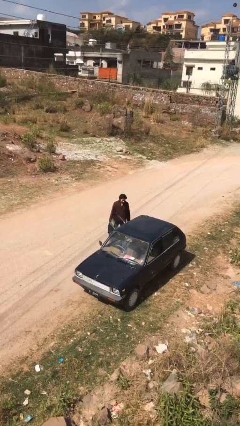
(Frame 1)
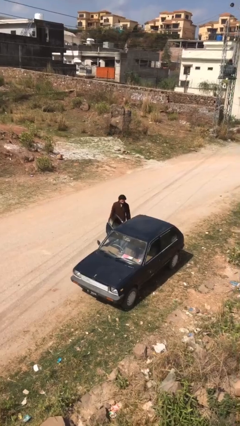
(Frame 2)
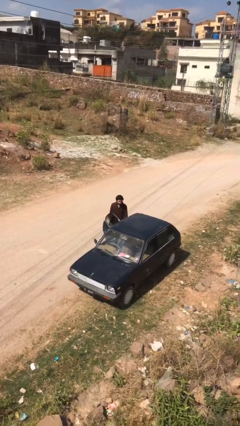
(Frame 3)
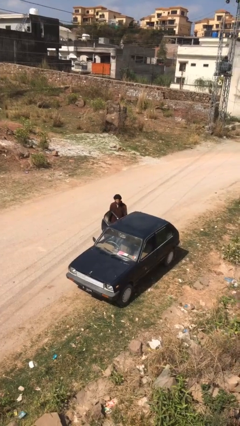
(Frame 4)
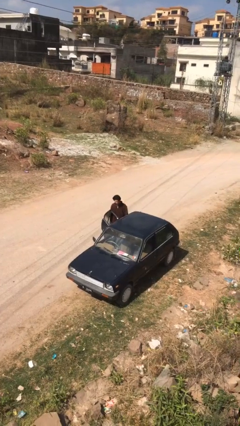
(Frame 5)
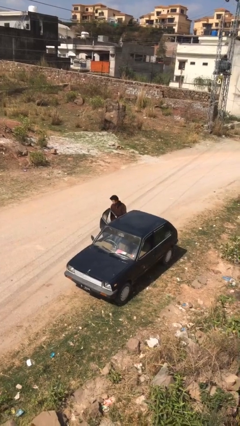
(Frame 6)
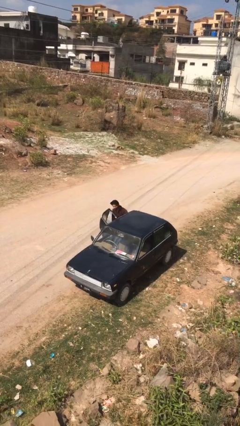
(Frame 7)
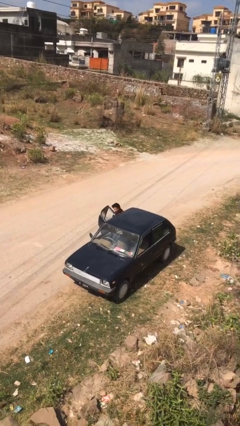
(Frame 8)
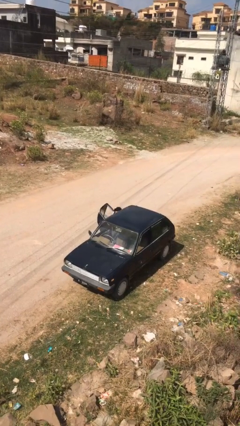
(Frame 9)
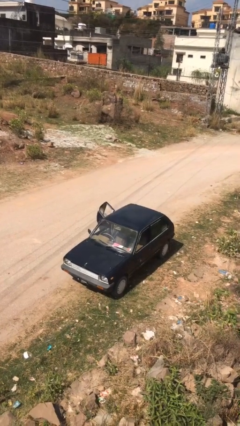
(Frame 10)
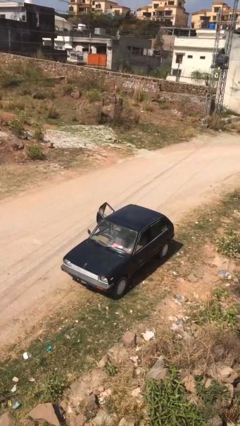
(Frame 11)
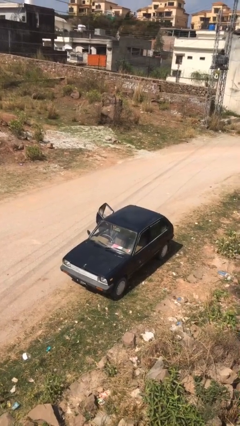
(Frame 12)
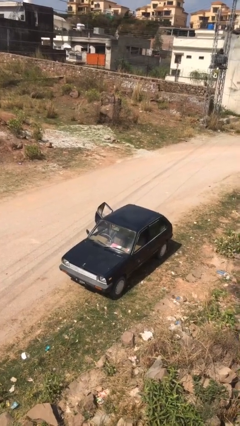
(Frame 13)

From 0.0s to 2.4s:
person enters car

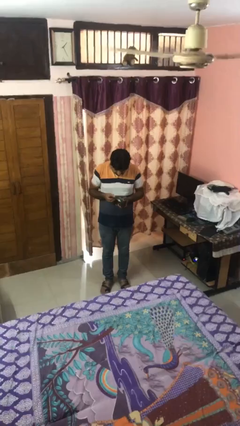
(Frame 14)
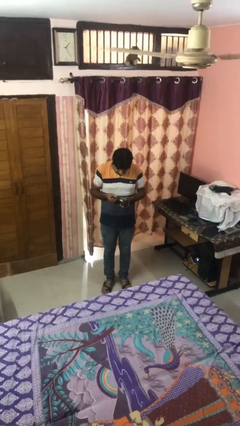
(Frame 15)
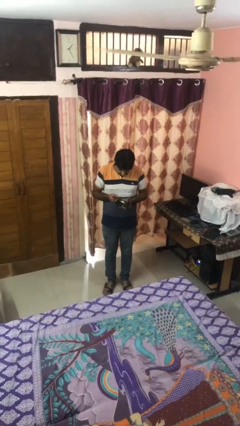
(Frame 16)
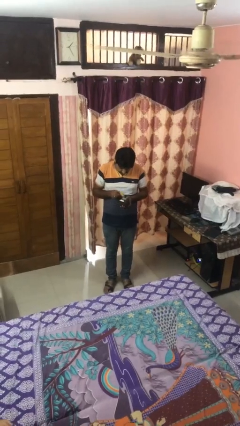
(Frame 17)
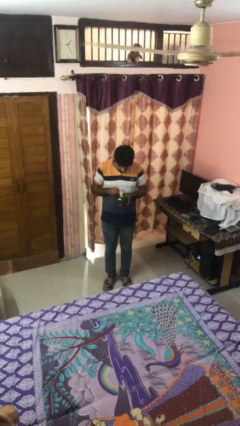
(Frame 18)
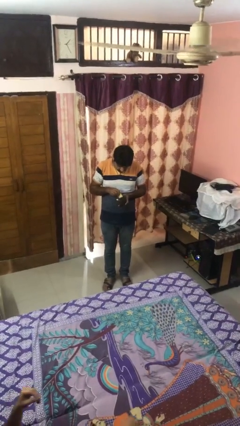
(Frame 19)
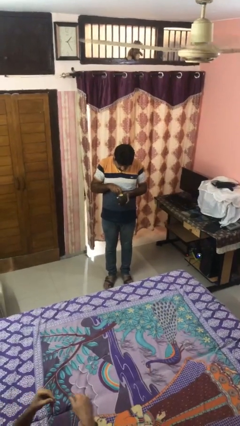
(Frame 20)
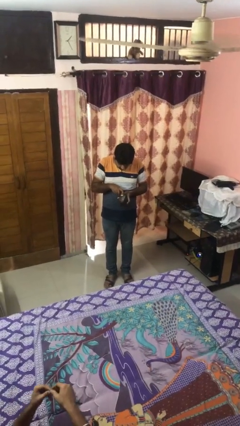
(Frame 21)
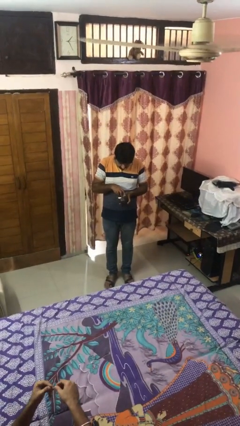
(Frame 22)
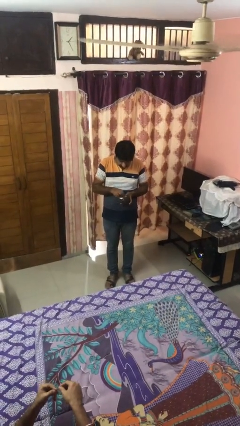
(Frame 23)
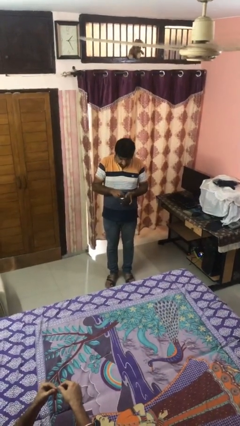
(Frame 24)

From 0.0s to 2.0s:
person puts object into purse

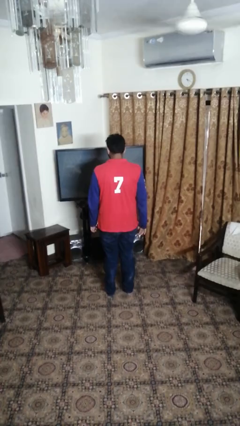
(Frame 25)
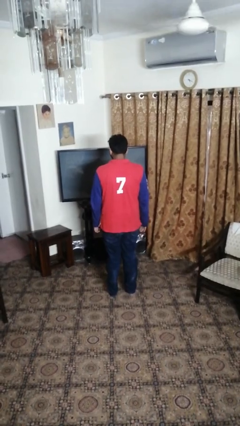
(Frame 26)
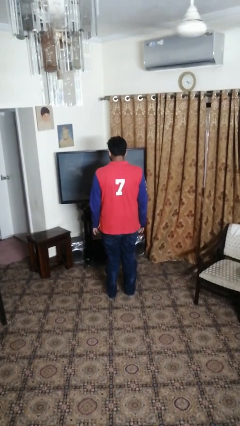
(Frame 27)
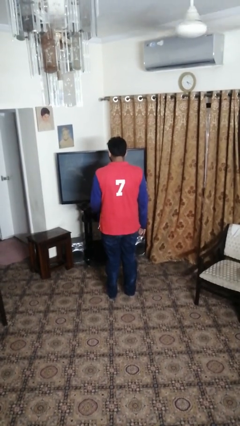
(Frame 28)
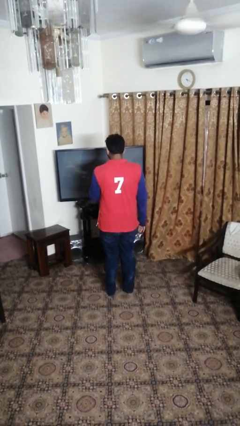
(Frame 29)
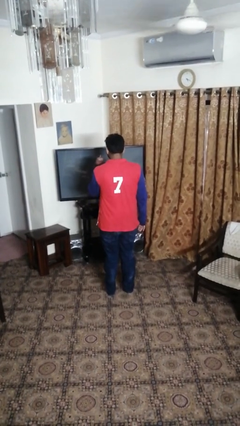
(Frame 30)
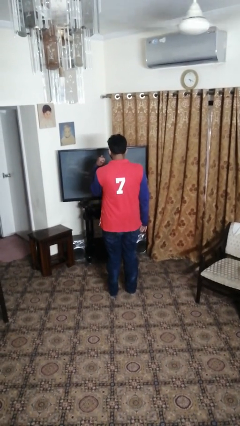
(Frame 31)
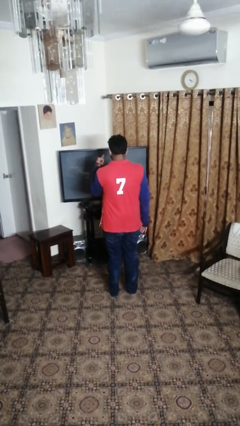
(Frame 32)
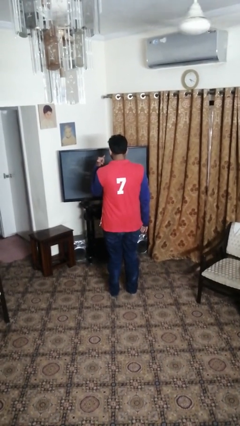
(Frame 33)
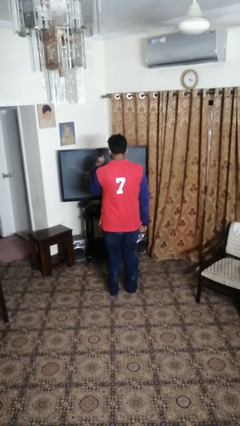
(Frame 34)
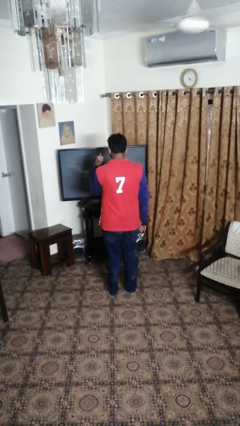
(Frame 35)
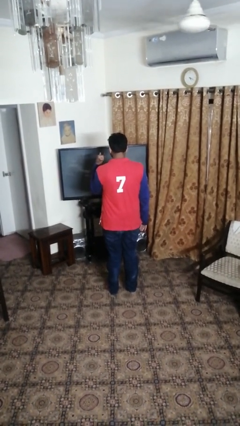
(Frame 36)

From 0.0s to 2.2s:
person gestures hang loose

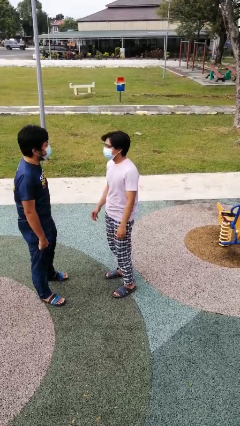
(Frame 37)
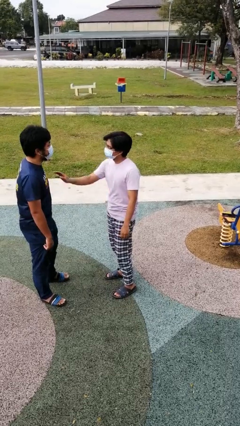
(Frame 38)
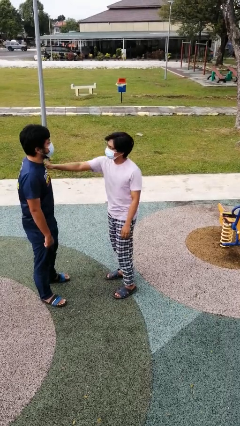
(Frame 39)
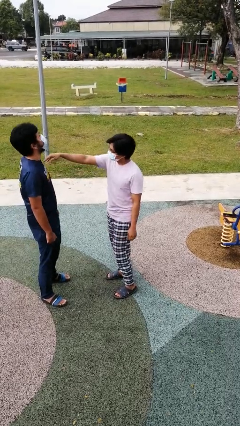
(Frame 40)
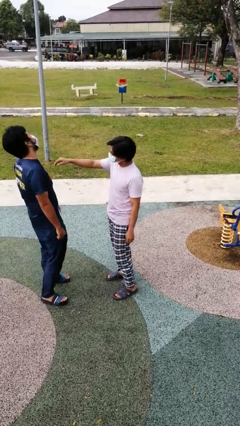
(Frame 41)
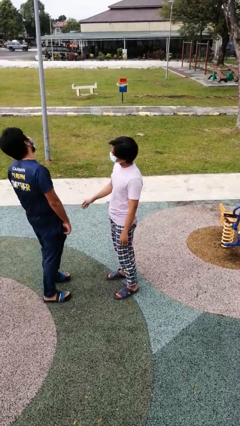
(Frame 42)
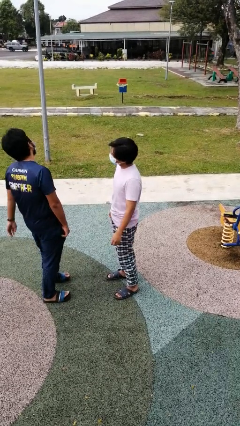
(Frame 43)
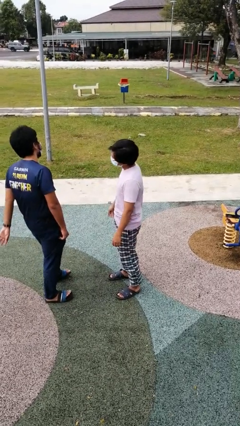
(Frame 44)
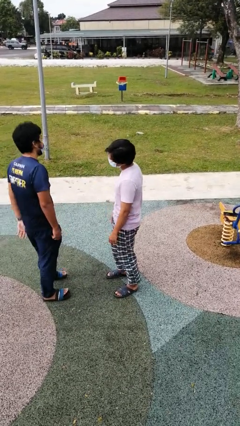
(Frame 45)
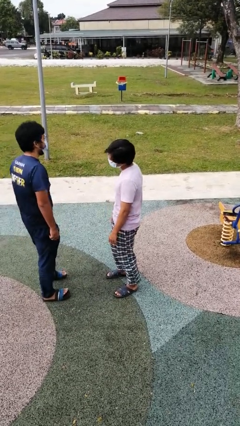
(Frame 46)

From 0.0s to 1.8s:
person shoves person

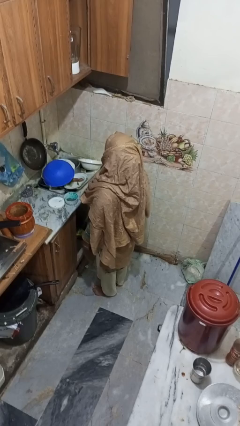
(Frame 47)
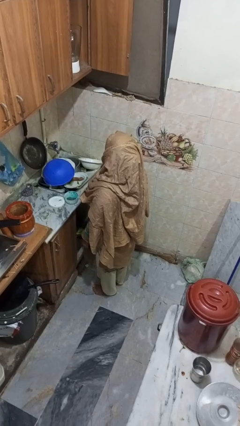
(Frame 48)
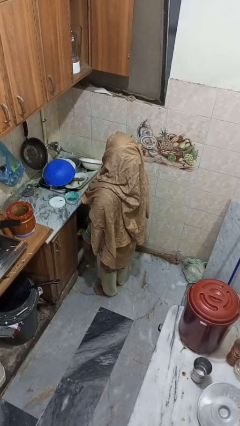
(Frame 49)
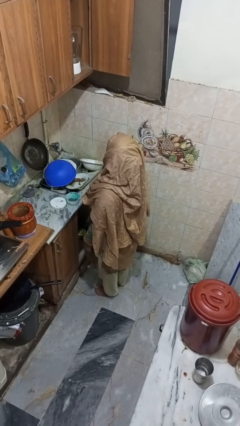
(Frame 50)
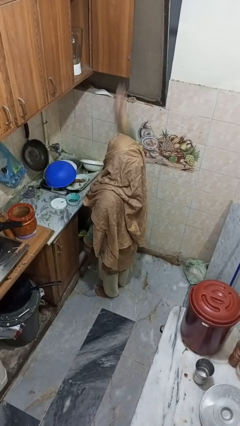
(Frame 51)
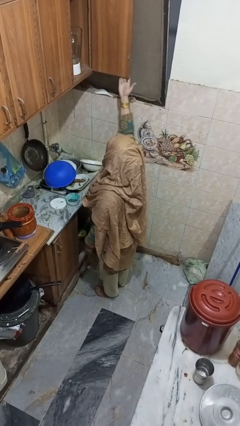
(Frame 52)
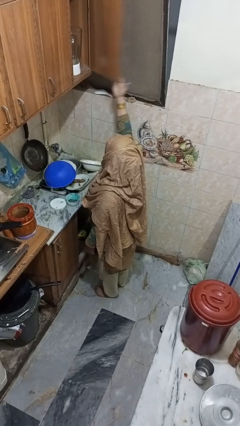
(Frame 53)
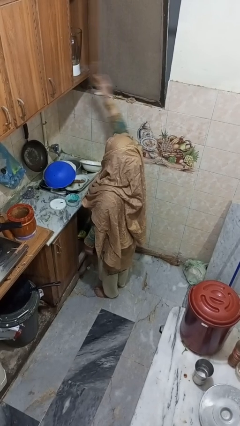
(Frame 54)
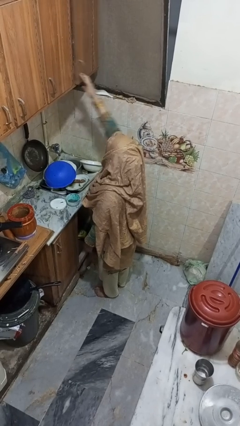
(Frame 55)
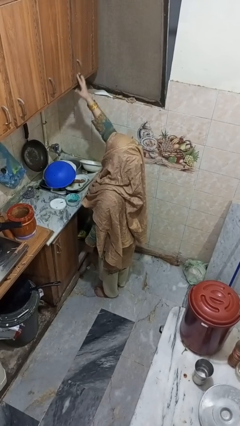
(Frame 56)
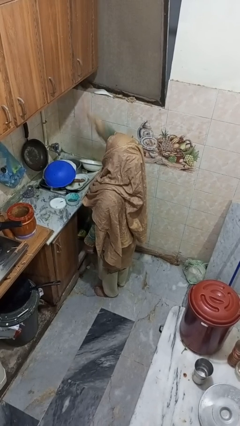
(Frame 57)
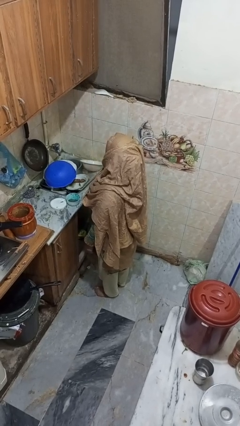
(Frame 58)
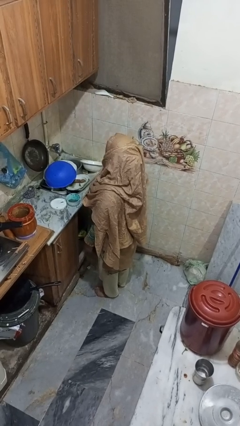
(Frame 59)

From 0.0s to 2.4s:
person closes cabinet

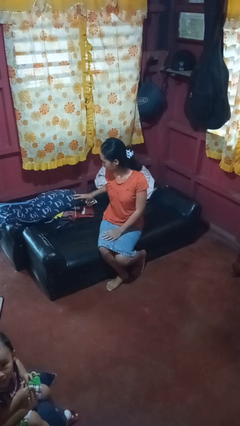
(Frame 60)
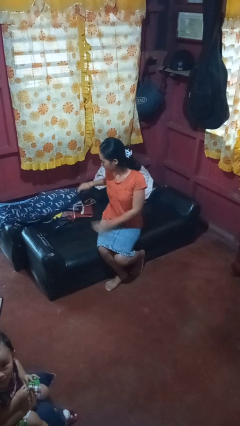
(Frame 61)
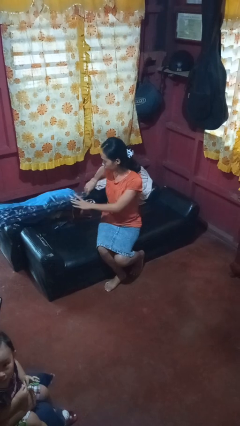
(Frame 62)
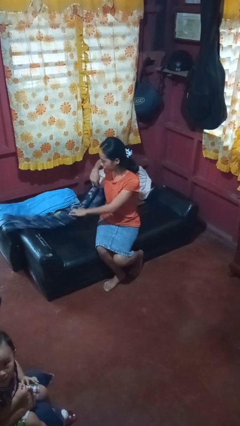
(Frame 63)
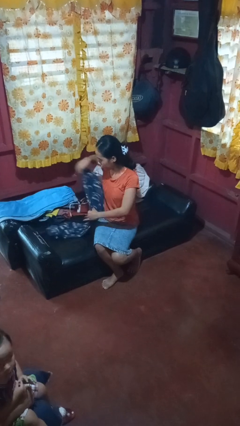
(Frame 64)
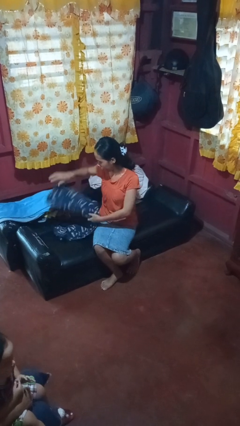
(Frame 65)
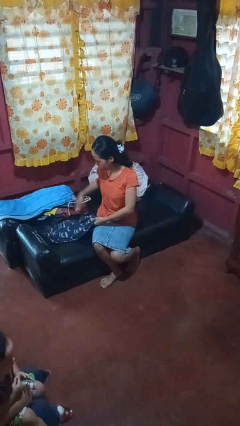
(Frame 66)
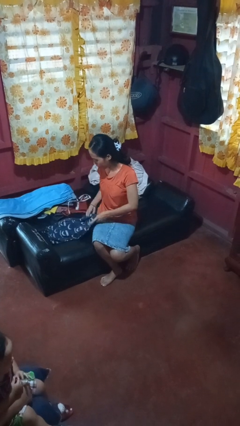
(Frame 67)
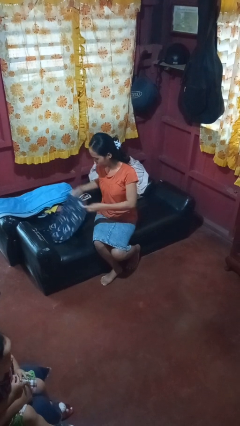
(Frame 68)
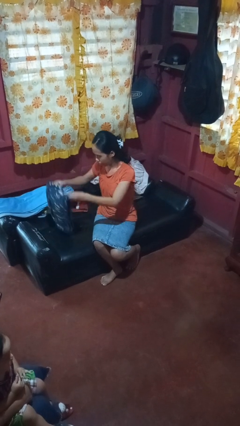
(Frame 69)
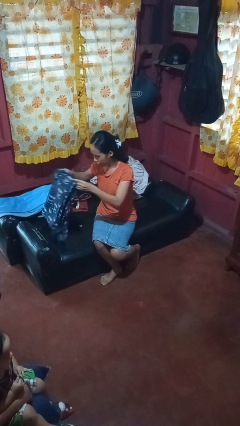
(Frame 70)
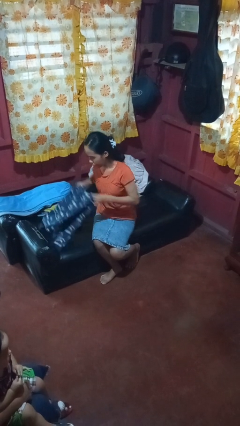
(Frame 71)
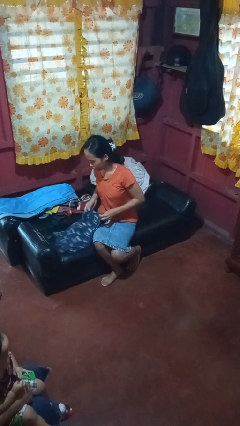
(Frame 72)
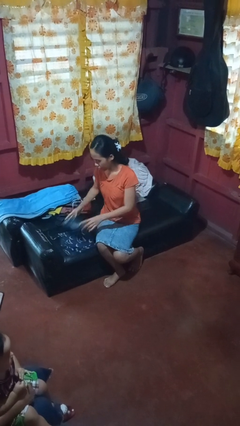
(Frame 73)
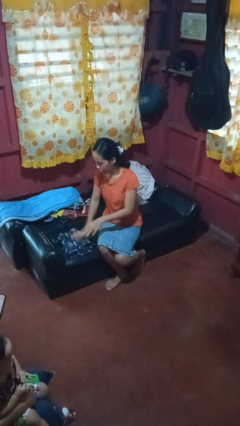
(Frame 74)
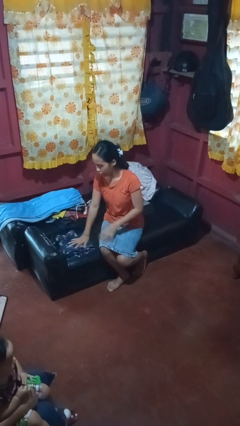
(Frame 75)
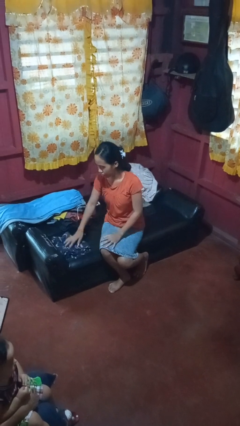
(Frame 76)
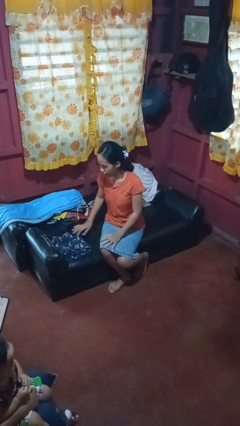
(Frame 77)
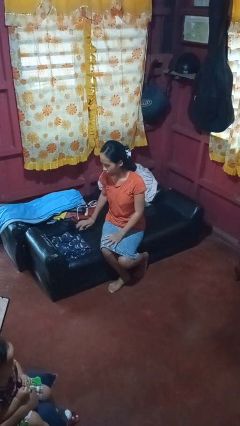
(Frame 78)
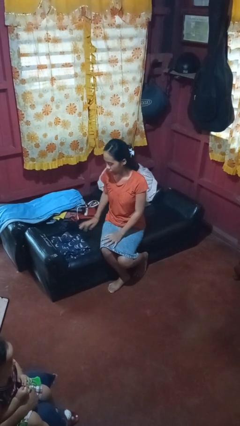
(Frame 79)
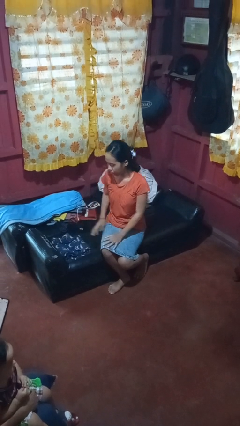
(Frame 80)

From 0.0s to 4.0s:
person folds pants

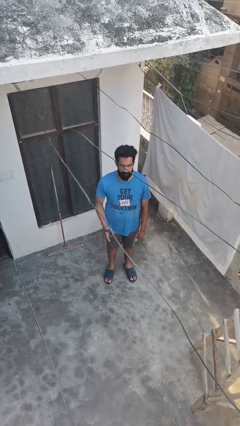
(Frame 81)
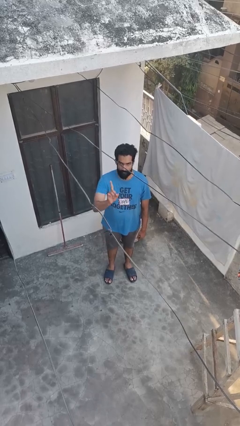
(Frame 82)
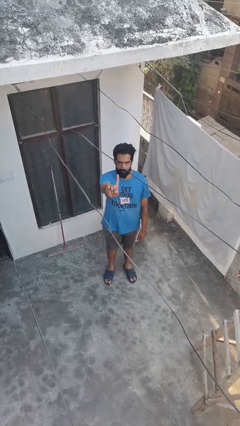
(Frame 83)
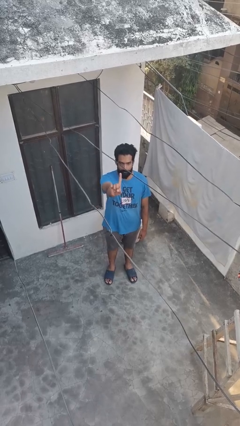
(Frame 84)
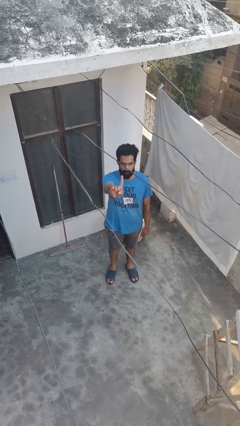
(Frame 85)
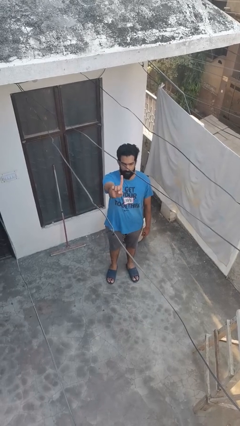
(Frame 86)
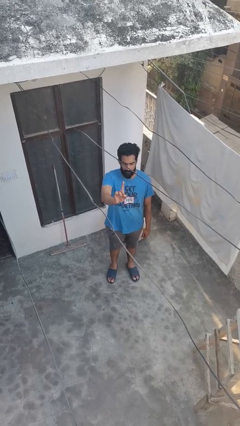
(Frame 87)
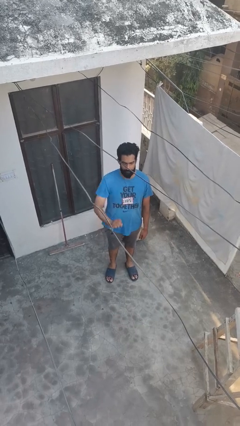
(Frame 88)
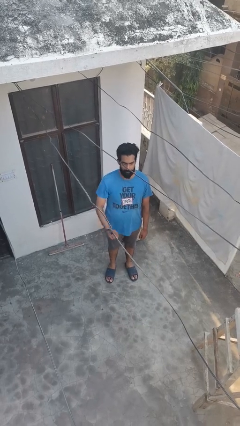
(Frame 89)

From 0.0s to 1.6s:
person gestures number one

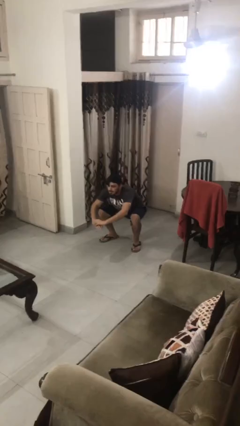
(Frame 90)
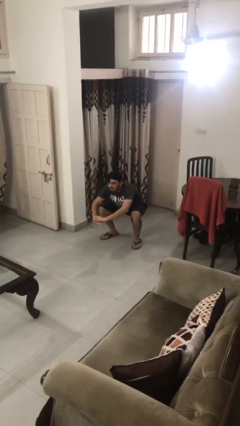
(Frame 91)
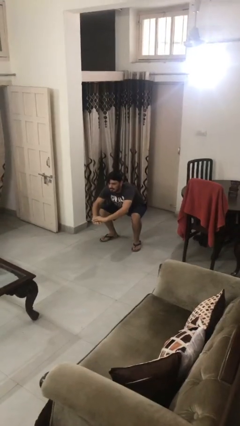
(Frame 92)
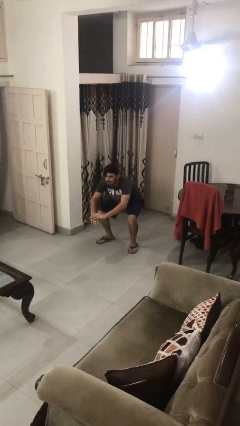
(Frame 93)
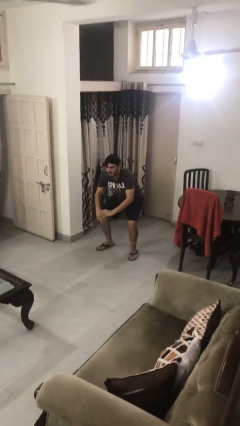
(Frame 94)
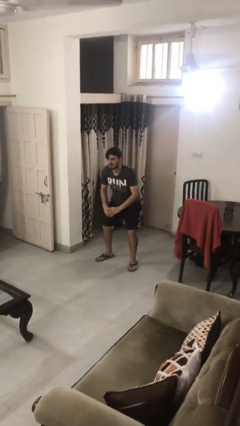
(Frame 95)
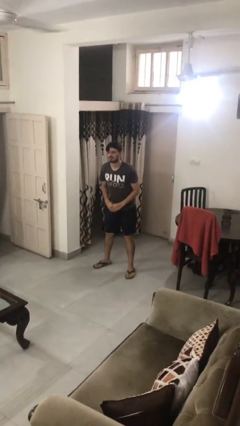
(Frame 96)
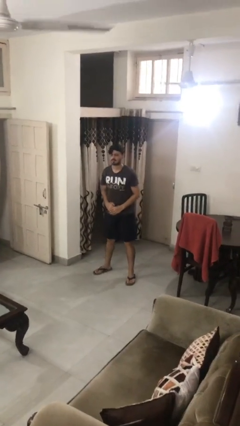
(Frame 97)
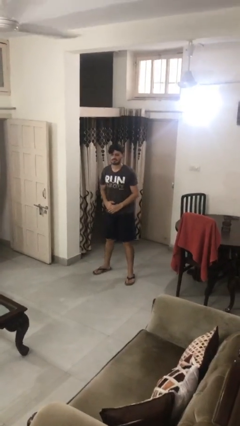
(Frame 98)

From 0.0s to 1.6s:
person stands up
